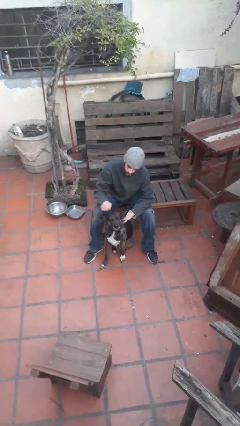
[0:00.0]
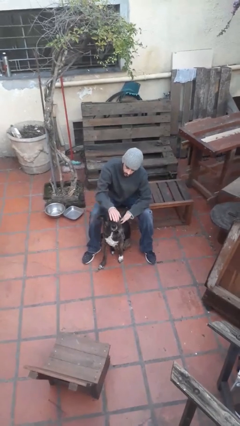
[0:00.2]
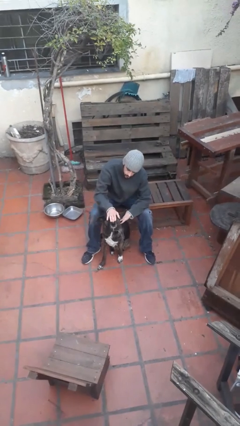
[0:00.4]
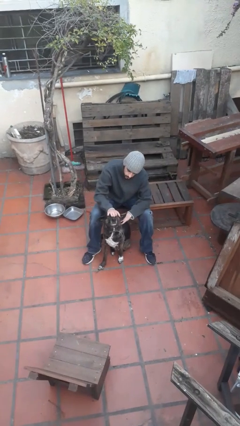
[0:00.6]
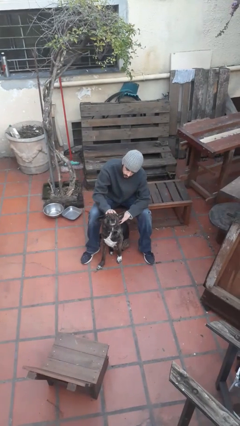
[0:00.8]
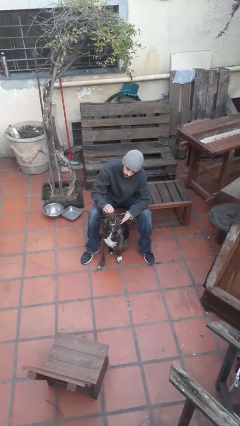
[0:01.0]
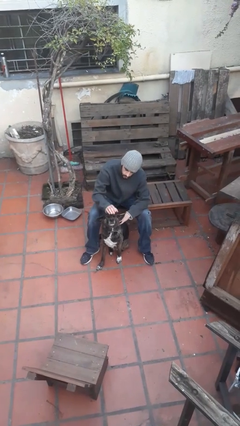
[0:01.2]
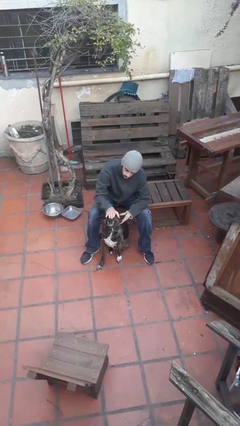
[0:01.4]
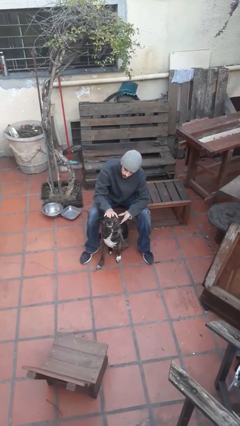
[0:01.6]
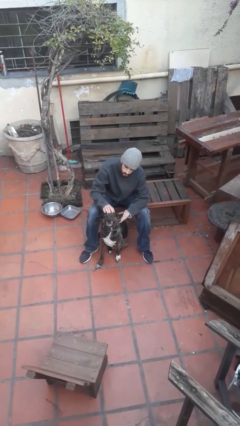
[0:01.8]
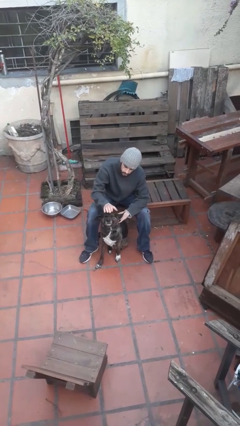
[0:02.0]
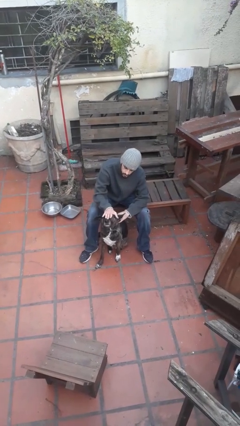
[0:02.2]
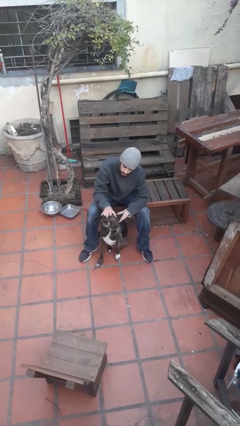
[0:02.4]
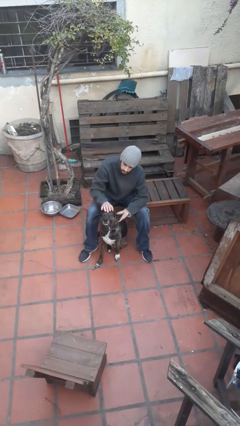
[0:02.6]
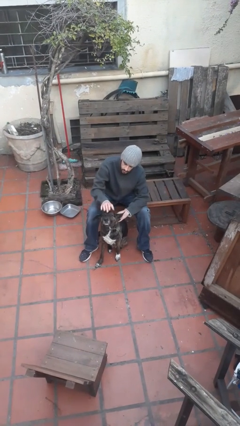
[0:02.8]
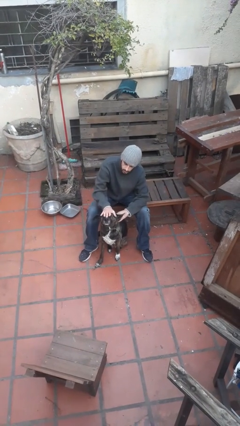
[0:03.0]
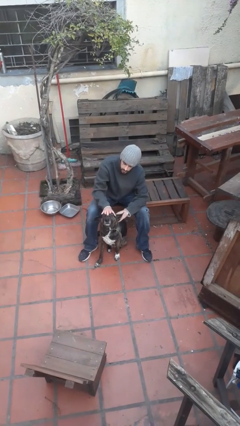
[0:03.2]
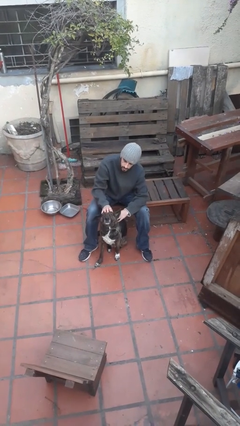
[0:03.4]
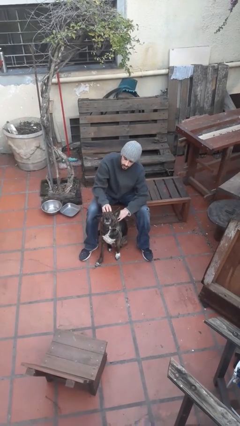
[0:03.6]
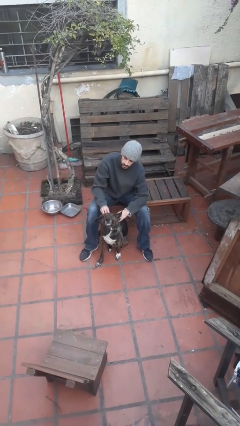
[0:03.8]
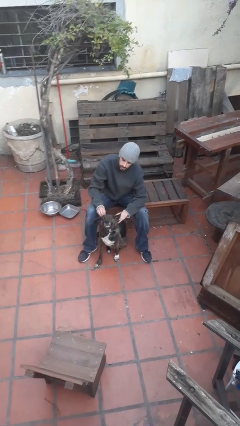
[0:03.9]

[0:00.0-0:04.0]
person pets dog

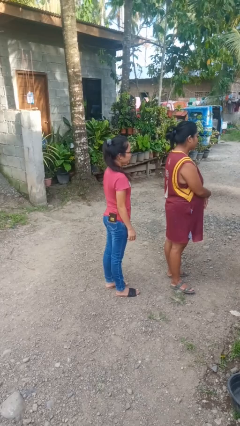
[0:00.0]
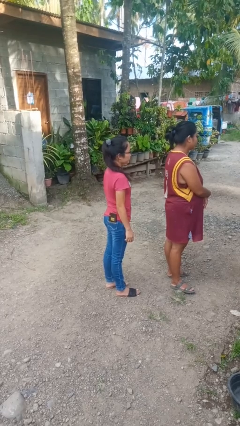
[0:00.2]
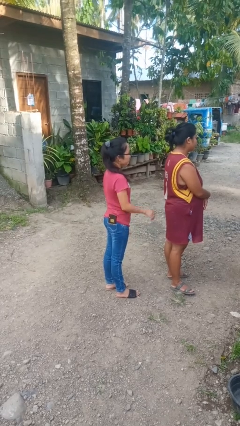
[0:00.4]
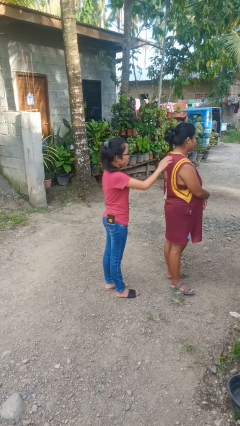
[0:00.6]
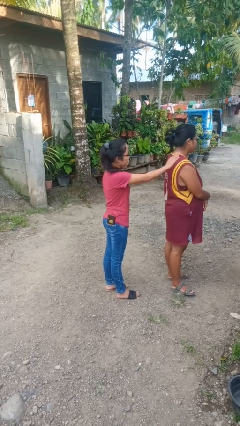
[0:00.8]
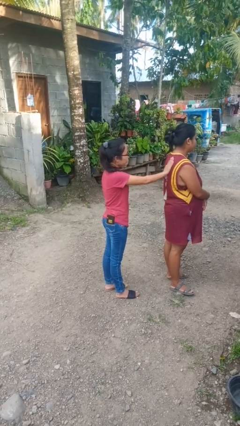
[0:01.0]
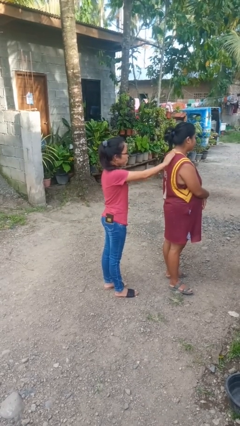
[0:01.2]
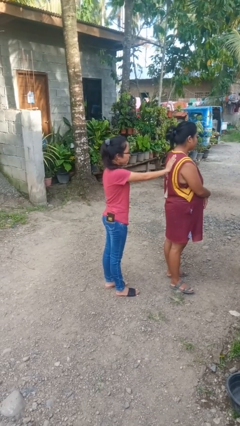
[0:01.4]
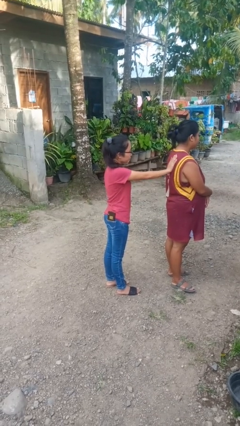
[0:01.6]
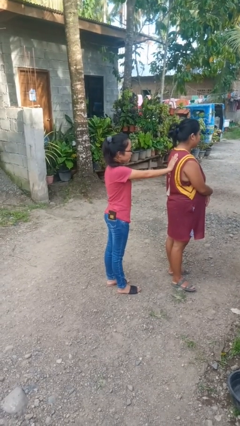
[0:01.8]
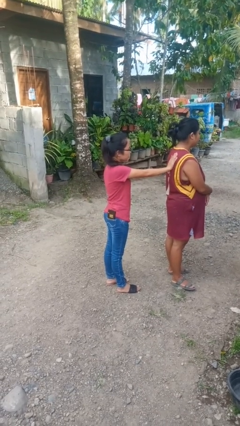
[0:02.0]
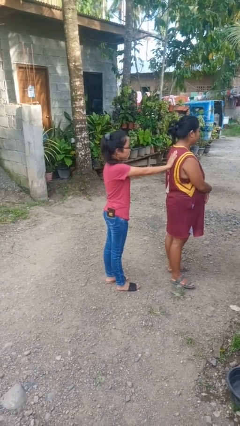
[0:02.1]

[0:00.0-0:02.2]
person touches back of person

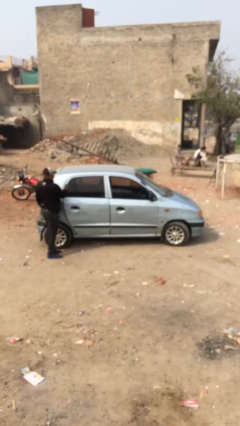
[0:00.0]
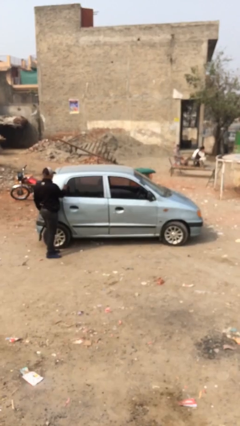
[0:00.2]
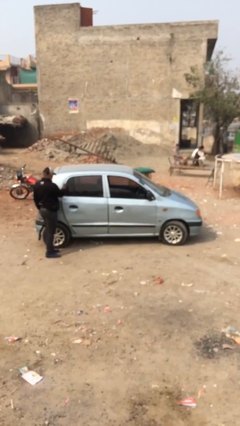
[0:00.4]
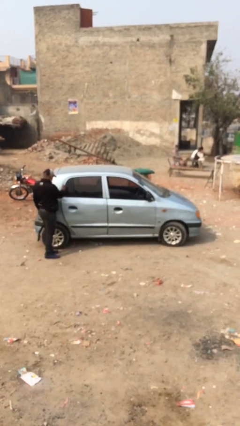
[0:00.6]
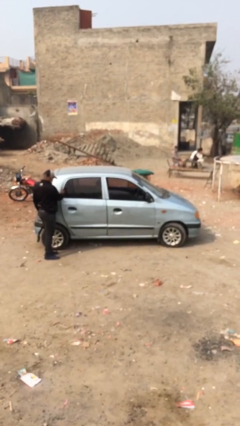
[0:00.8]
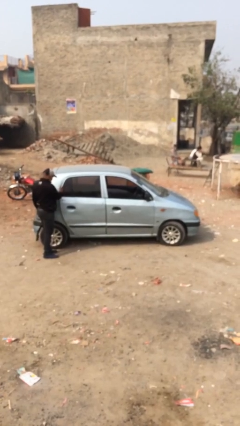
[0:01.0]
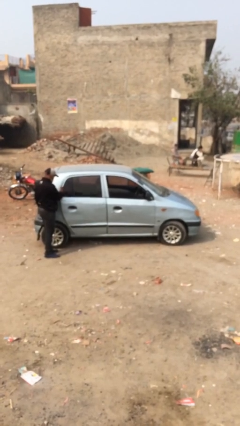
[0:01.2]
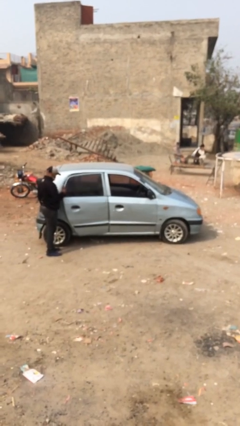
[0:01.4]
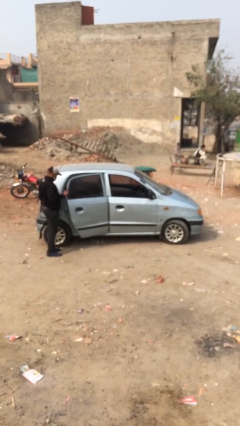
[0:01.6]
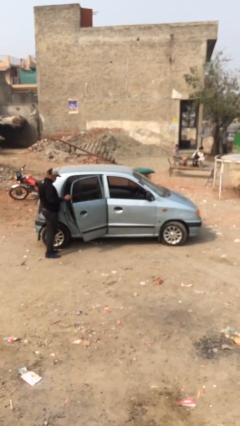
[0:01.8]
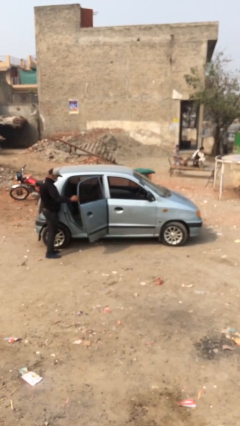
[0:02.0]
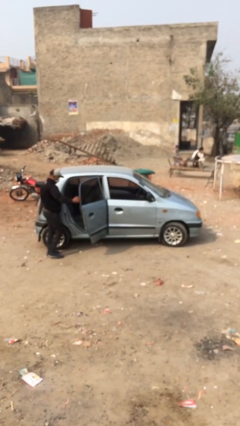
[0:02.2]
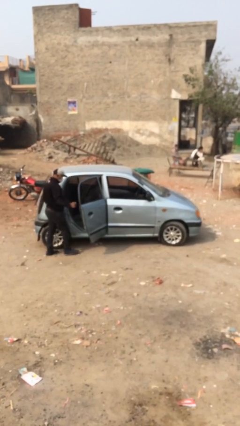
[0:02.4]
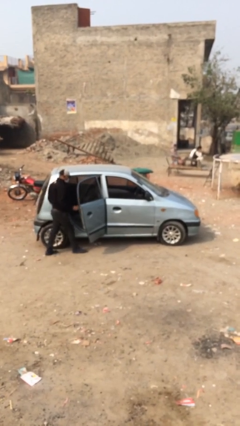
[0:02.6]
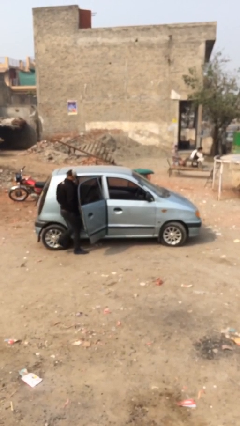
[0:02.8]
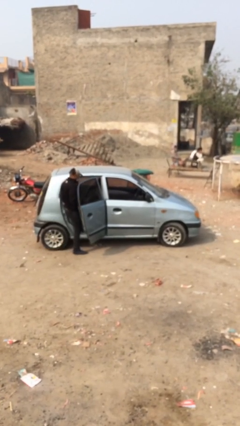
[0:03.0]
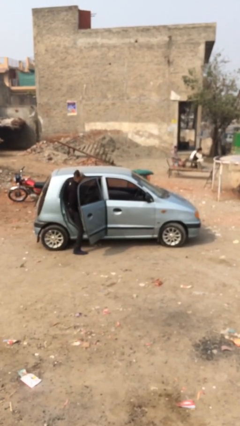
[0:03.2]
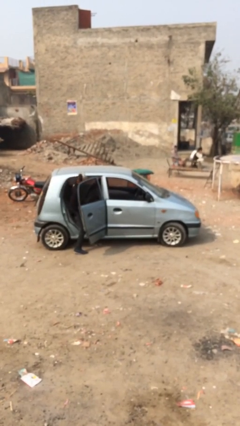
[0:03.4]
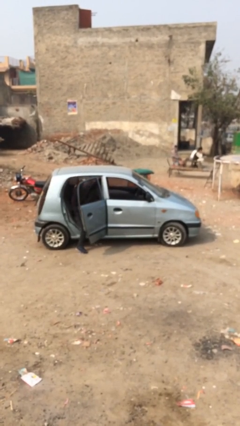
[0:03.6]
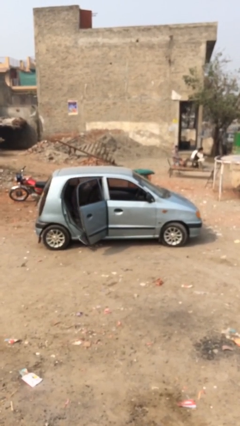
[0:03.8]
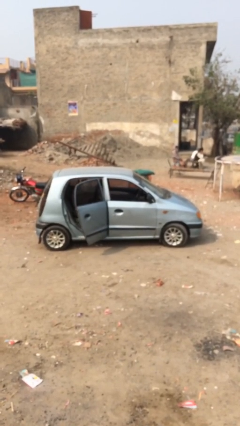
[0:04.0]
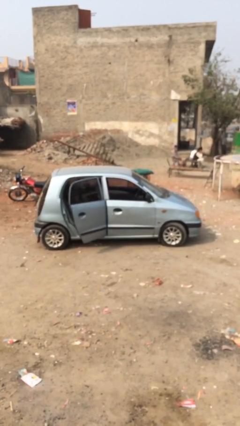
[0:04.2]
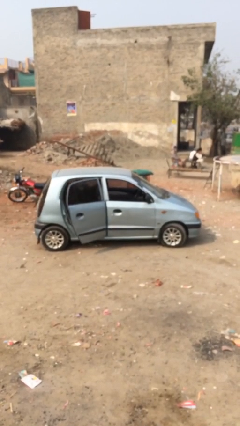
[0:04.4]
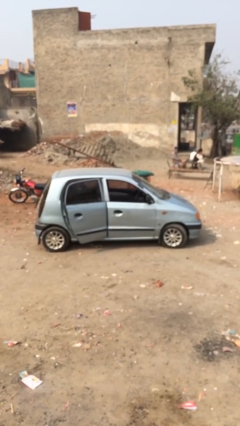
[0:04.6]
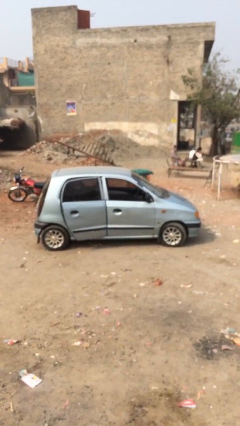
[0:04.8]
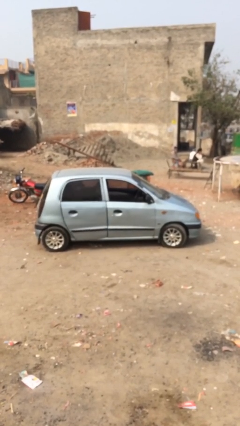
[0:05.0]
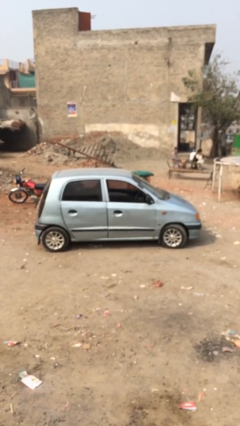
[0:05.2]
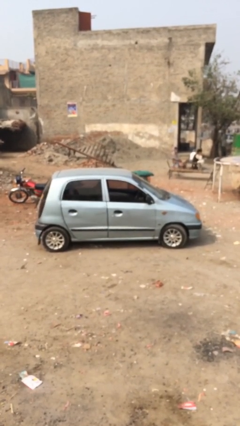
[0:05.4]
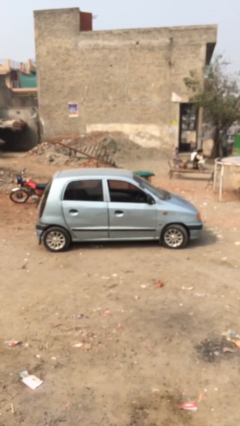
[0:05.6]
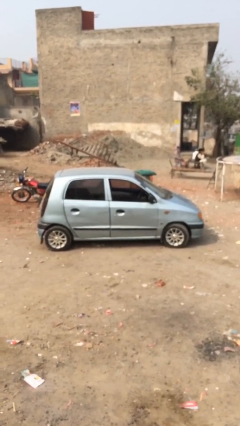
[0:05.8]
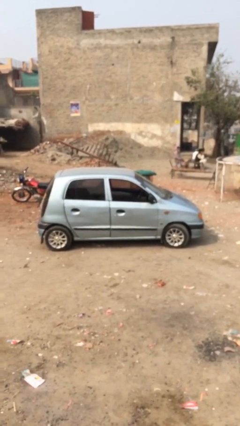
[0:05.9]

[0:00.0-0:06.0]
car picks up person

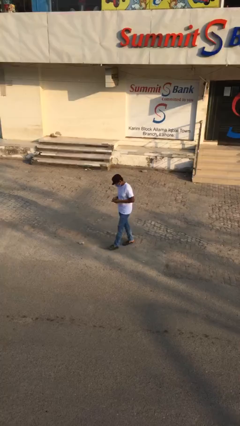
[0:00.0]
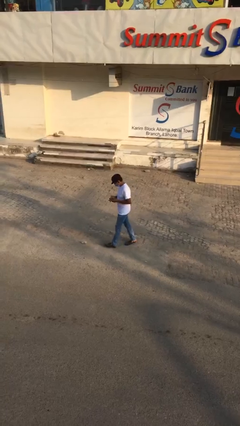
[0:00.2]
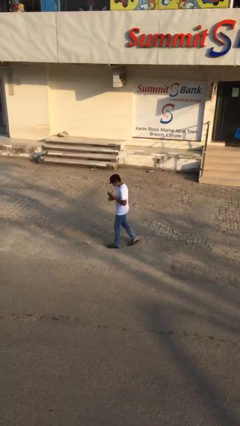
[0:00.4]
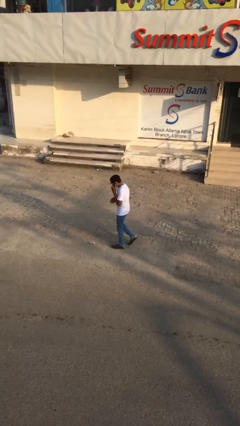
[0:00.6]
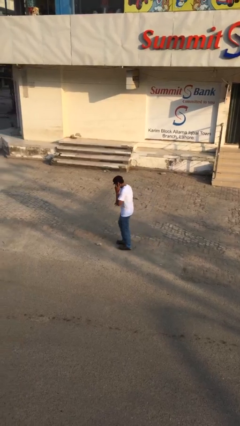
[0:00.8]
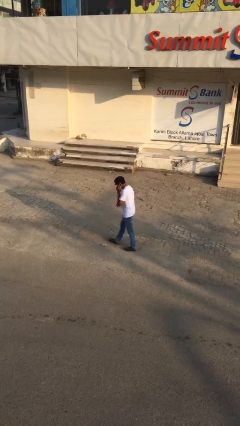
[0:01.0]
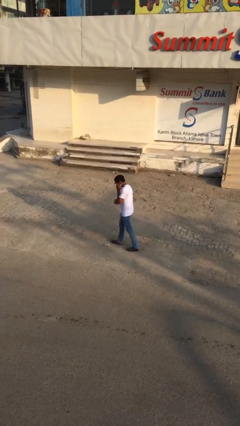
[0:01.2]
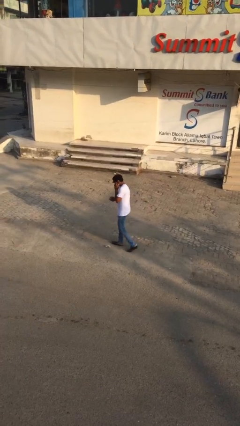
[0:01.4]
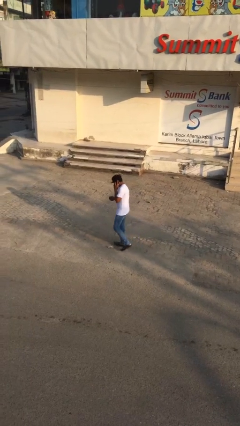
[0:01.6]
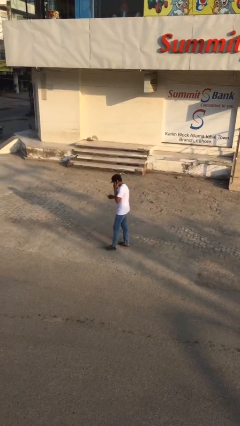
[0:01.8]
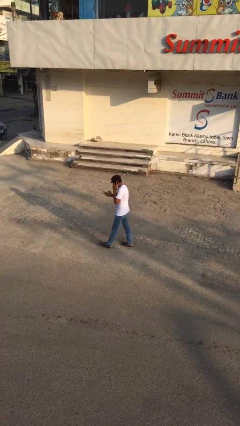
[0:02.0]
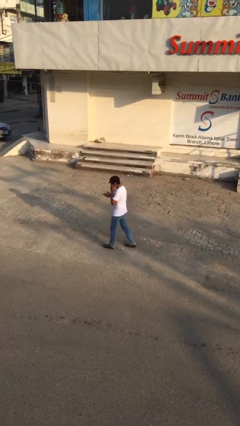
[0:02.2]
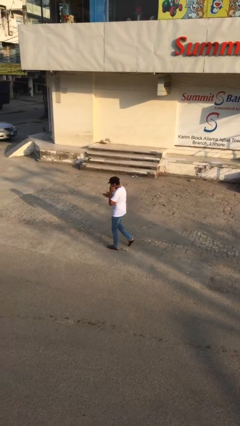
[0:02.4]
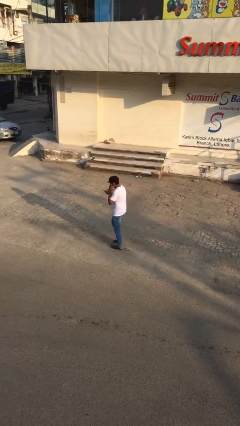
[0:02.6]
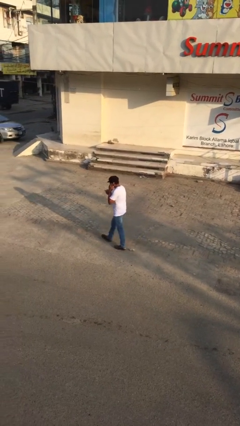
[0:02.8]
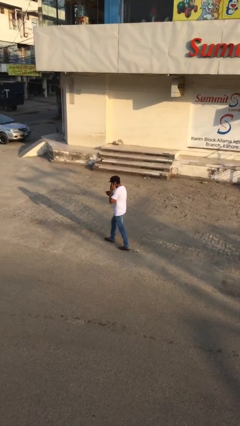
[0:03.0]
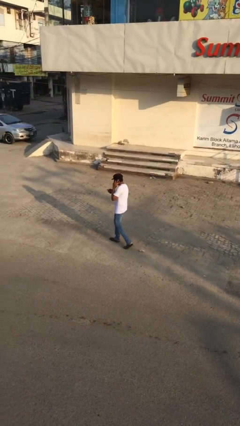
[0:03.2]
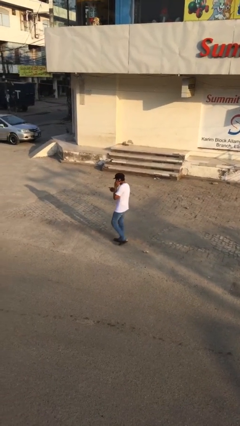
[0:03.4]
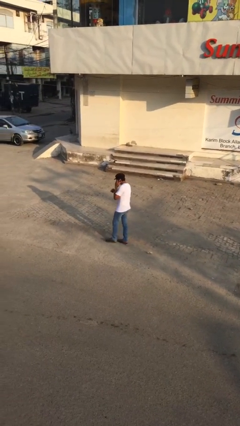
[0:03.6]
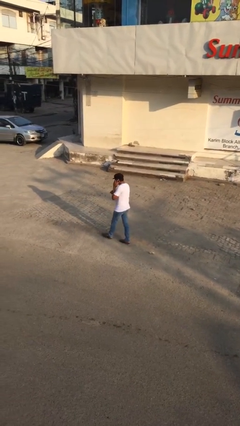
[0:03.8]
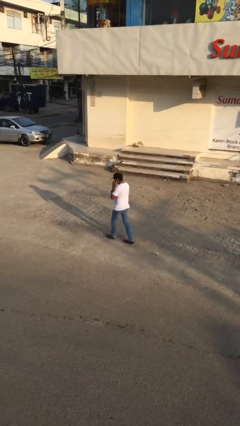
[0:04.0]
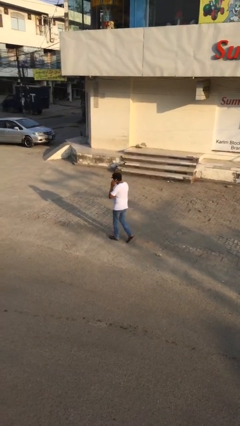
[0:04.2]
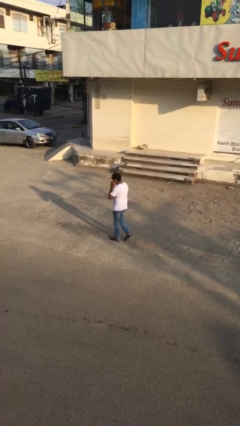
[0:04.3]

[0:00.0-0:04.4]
person talks on phone

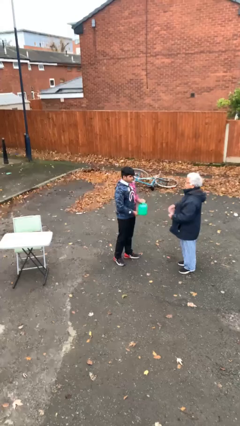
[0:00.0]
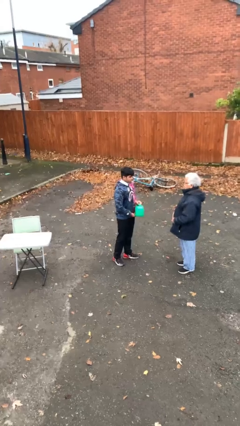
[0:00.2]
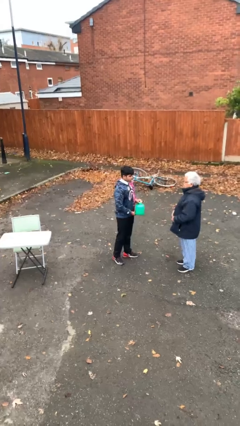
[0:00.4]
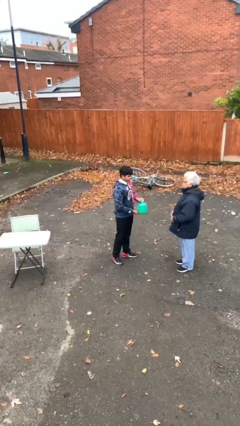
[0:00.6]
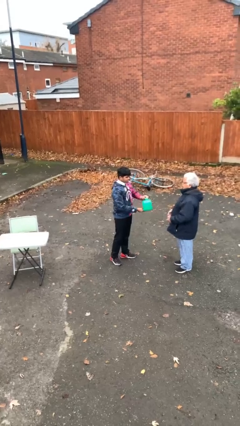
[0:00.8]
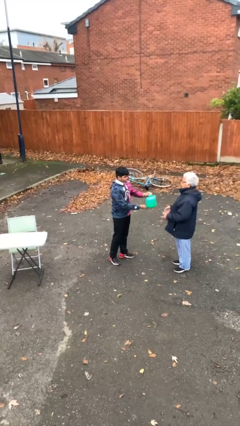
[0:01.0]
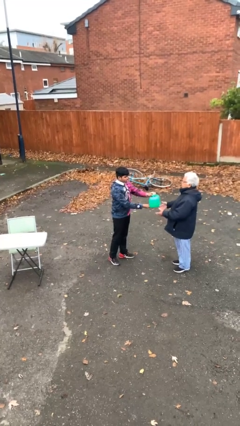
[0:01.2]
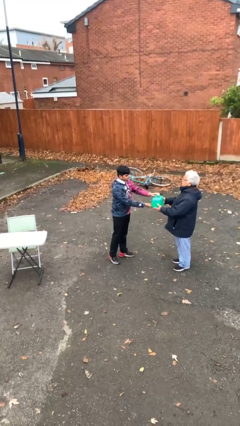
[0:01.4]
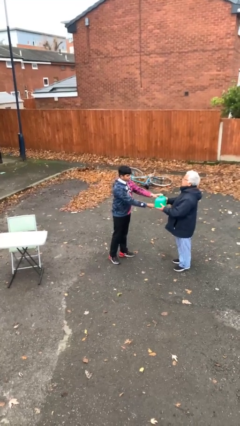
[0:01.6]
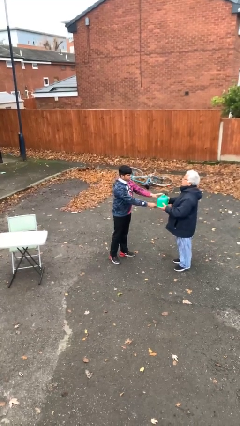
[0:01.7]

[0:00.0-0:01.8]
person transfers object to person
